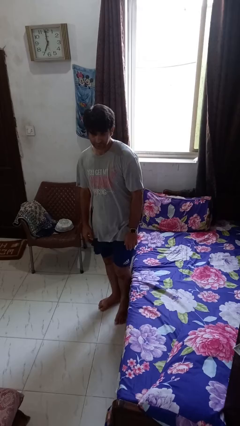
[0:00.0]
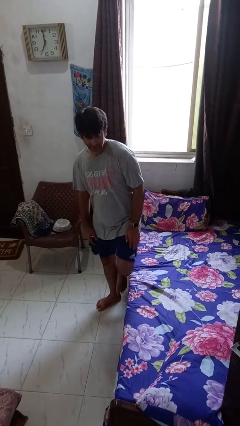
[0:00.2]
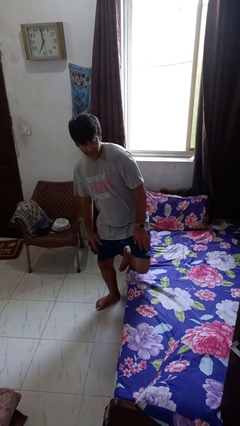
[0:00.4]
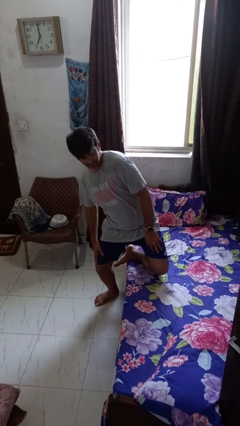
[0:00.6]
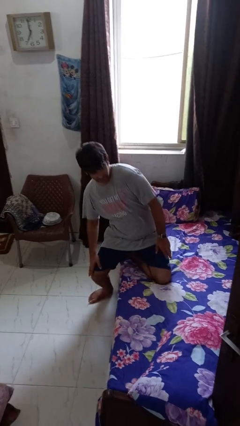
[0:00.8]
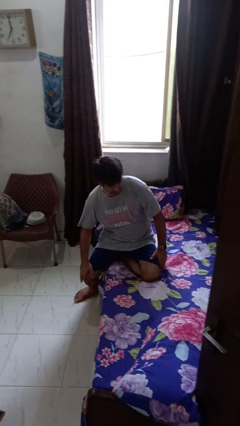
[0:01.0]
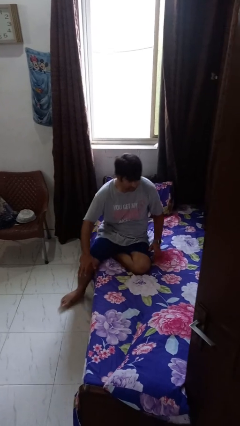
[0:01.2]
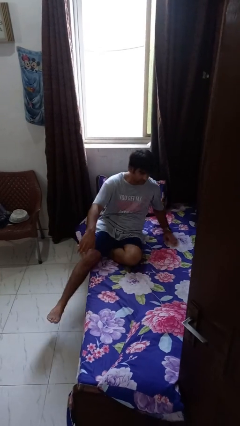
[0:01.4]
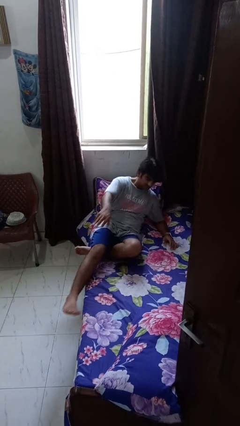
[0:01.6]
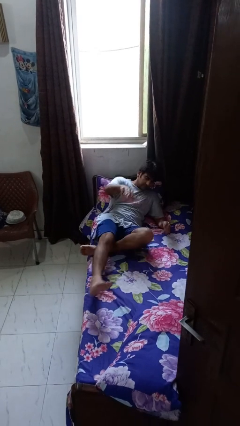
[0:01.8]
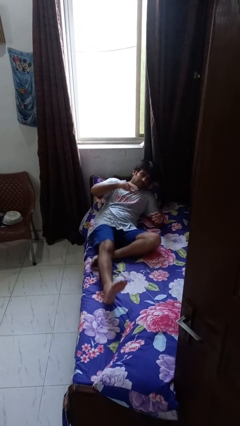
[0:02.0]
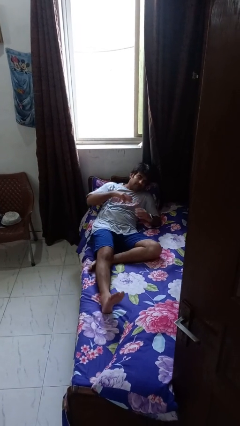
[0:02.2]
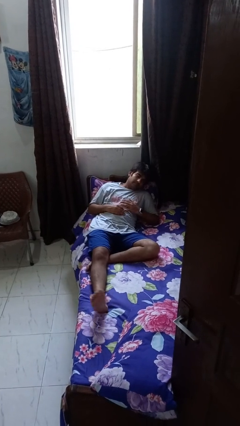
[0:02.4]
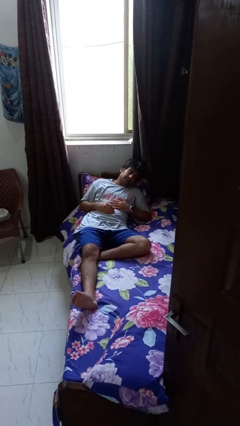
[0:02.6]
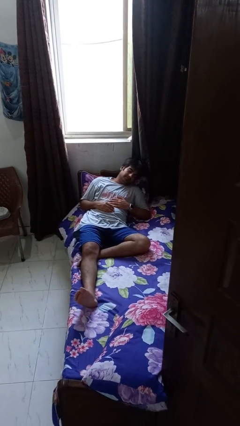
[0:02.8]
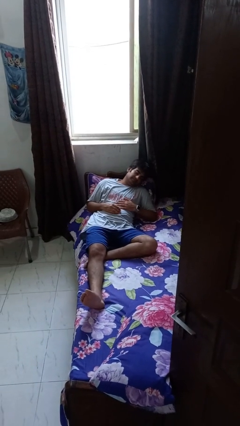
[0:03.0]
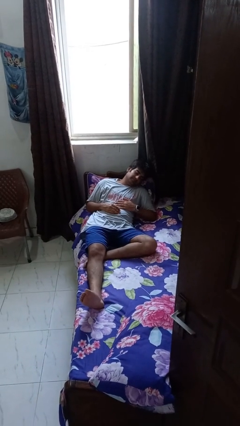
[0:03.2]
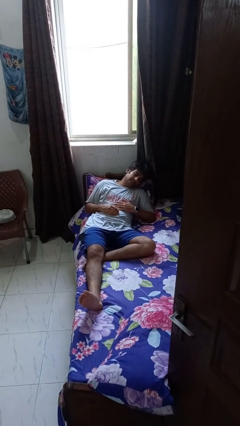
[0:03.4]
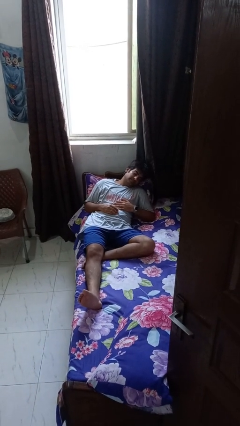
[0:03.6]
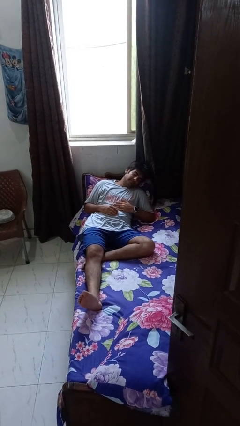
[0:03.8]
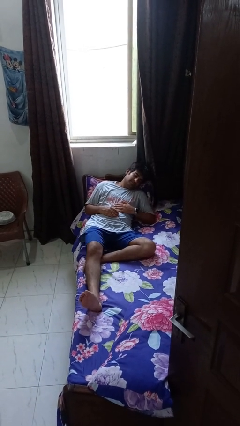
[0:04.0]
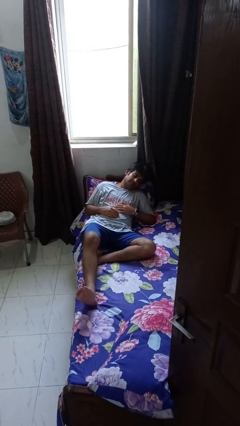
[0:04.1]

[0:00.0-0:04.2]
person lies down on bed

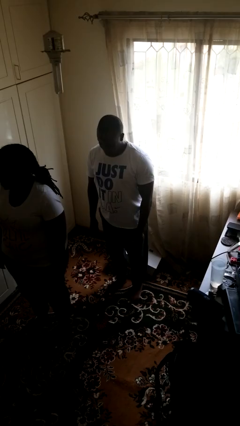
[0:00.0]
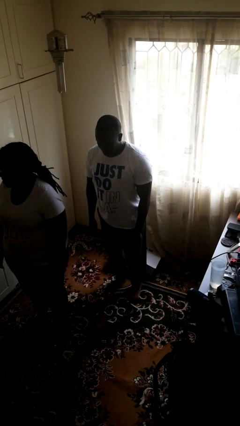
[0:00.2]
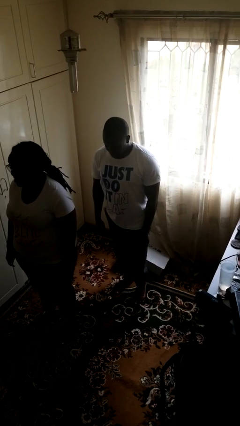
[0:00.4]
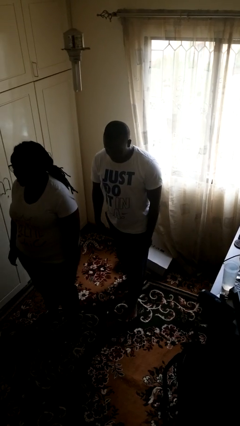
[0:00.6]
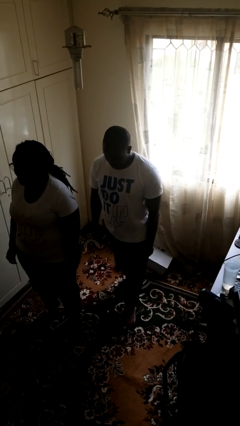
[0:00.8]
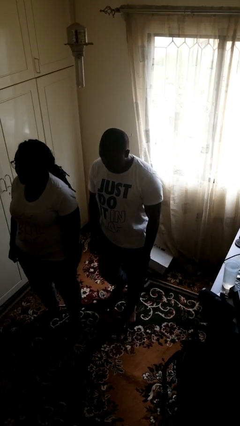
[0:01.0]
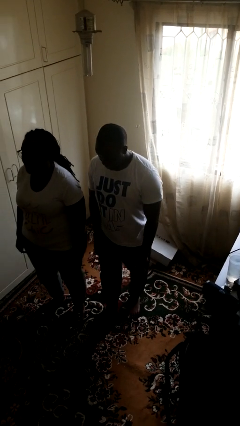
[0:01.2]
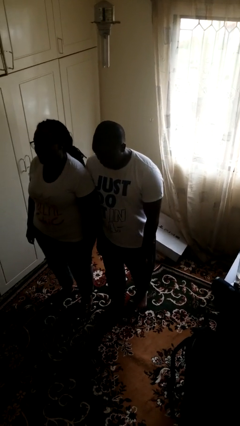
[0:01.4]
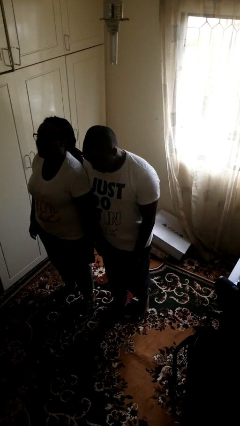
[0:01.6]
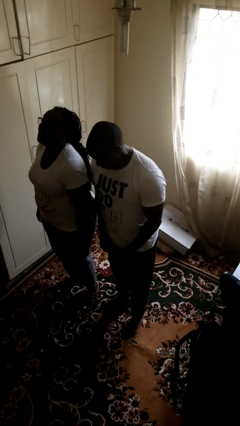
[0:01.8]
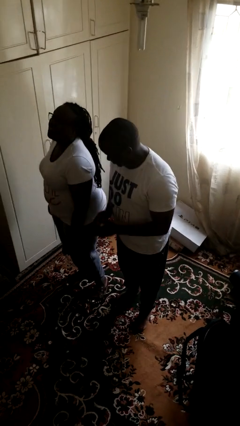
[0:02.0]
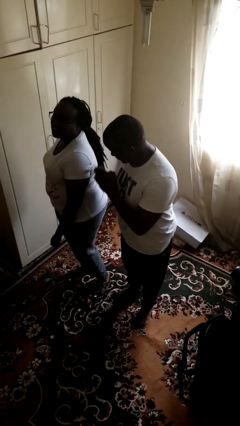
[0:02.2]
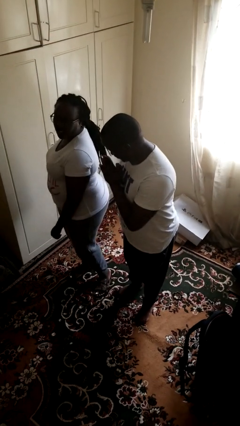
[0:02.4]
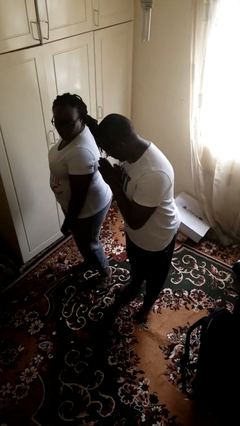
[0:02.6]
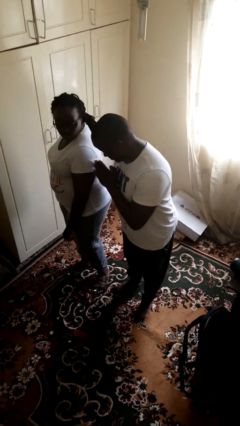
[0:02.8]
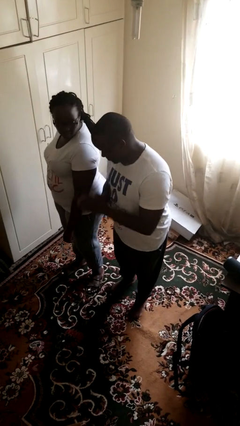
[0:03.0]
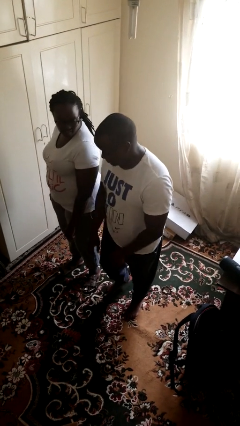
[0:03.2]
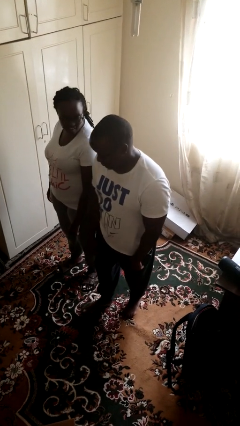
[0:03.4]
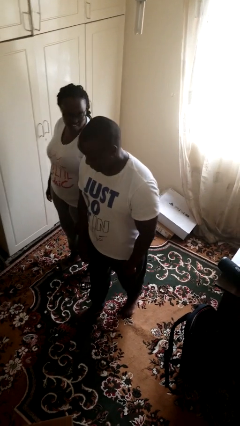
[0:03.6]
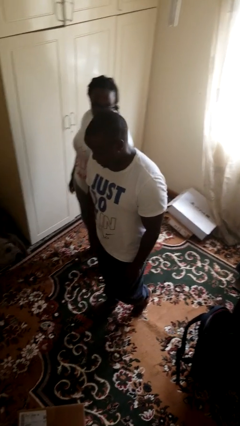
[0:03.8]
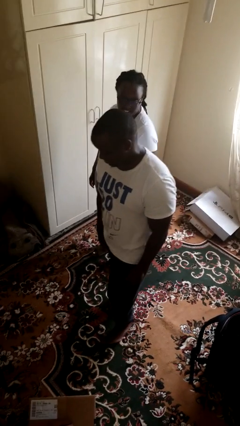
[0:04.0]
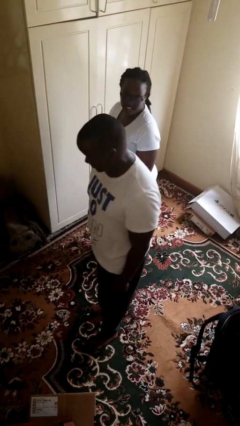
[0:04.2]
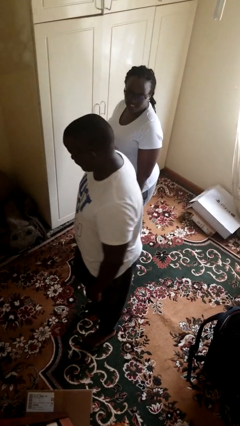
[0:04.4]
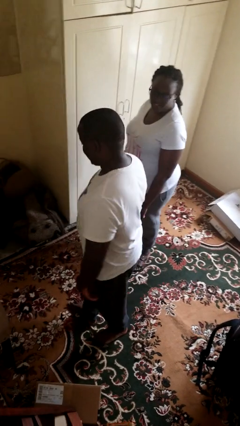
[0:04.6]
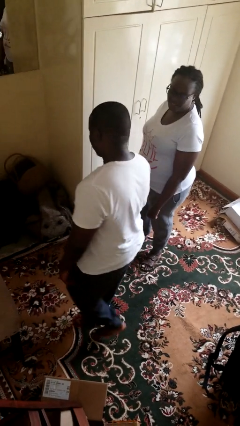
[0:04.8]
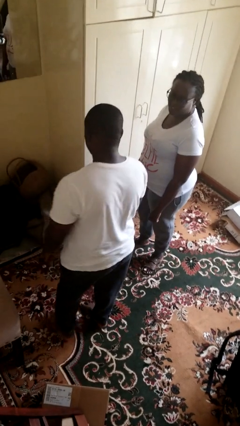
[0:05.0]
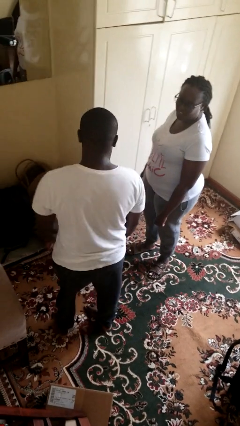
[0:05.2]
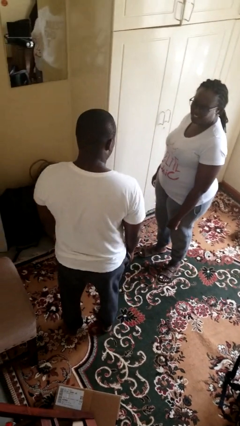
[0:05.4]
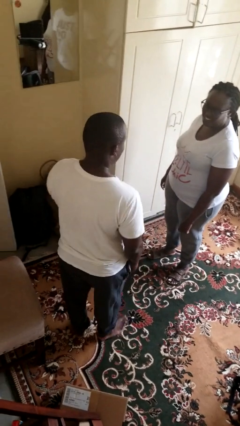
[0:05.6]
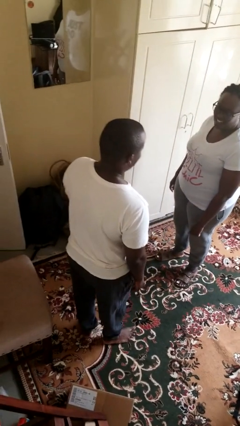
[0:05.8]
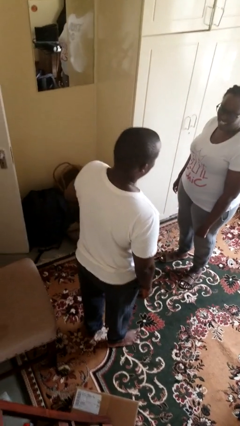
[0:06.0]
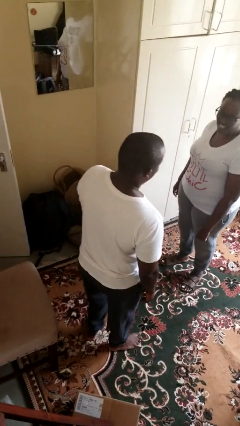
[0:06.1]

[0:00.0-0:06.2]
person bumps into person

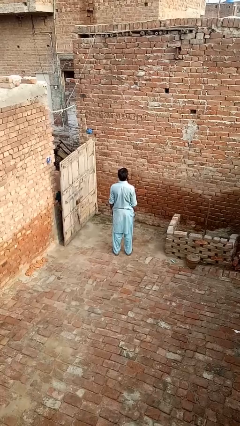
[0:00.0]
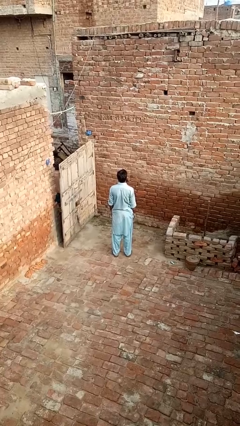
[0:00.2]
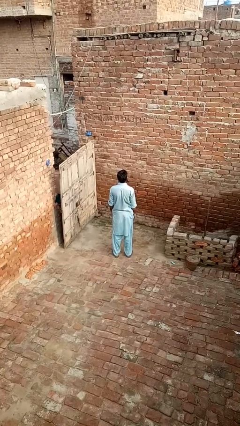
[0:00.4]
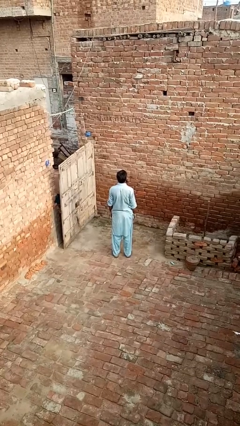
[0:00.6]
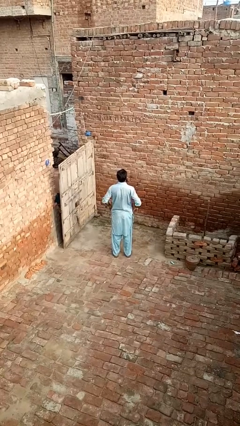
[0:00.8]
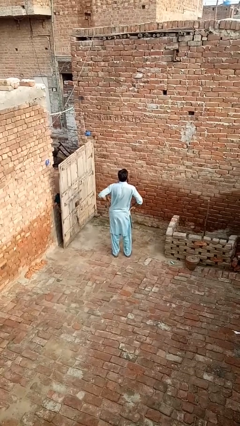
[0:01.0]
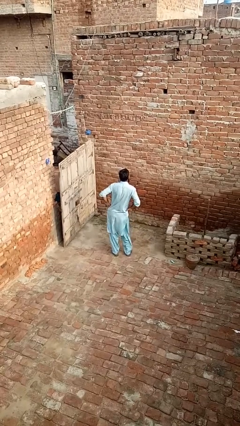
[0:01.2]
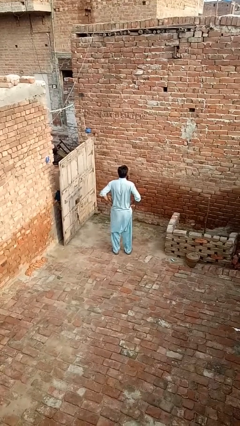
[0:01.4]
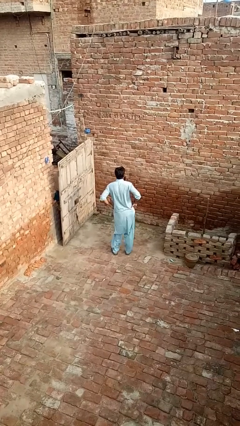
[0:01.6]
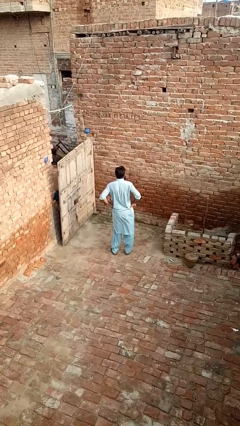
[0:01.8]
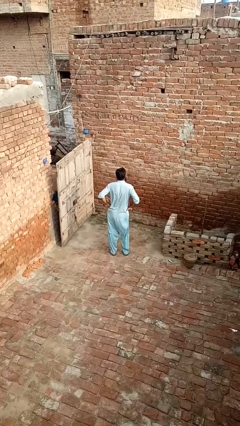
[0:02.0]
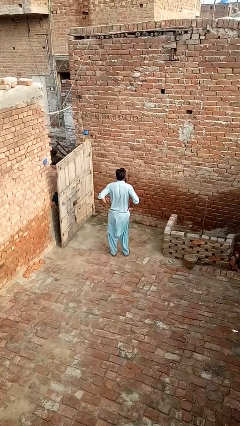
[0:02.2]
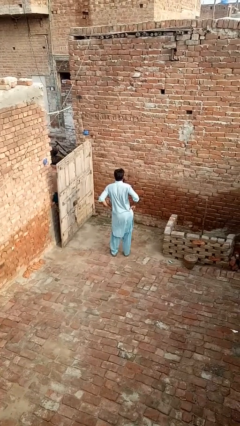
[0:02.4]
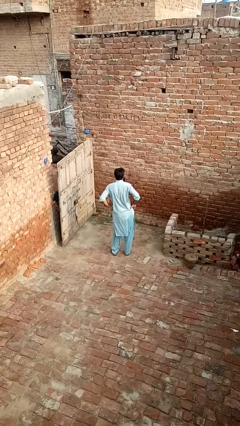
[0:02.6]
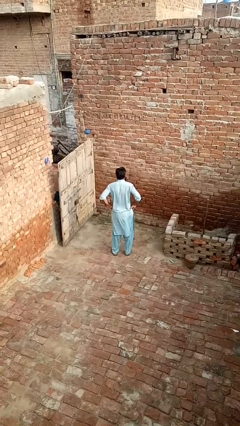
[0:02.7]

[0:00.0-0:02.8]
person wiggles hips

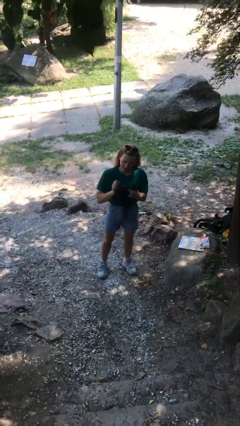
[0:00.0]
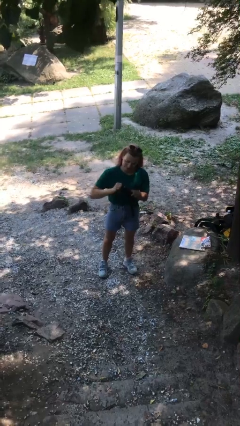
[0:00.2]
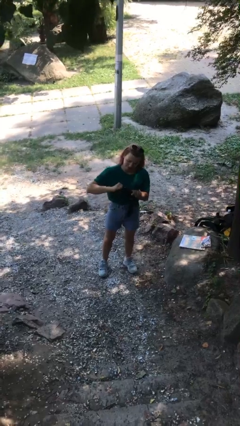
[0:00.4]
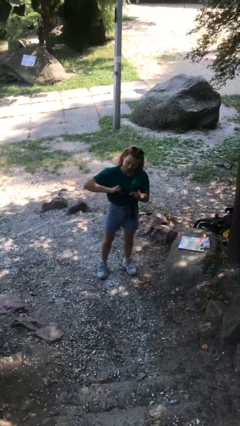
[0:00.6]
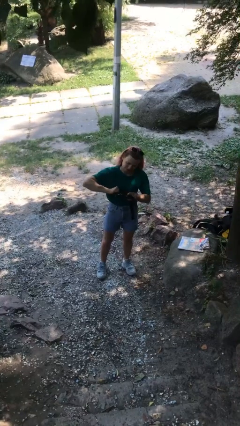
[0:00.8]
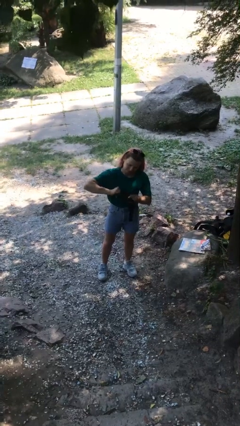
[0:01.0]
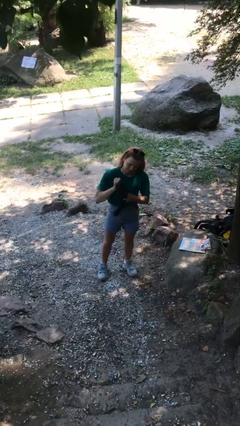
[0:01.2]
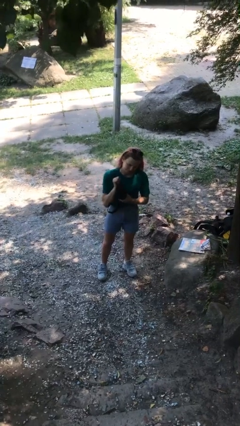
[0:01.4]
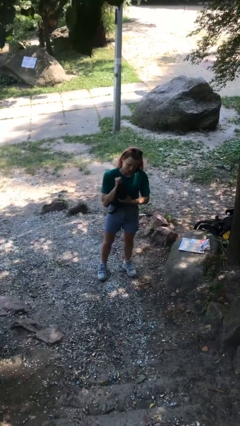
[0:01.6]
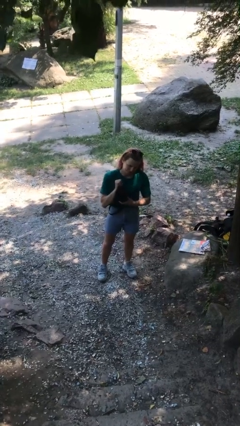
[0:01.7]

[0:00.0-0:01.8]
person squeezes object

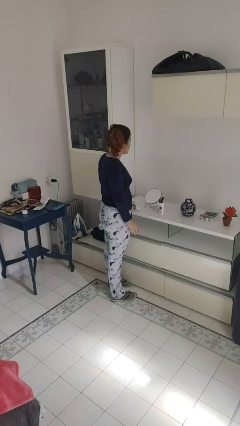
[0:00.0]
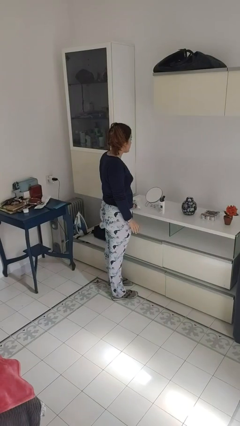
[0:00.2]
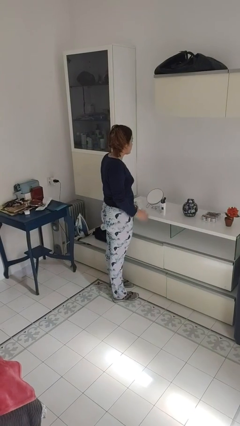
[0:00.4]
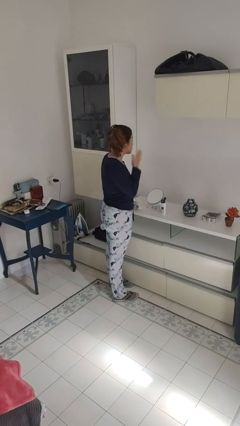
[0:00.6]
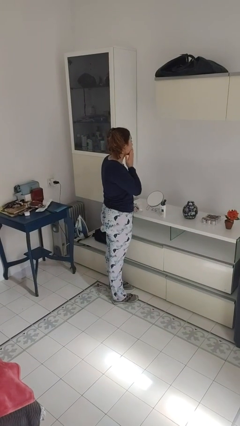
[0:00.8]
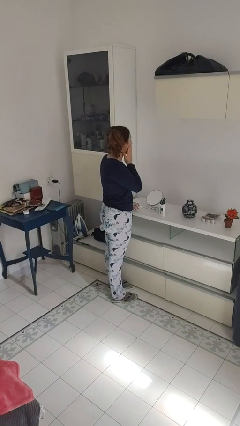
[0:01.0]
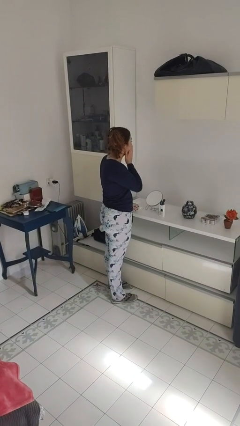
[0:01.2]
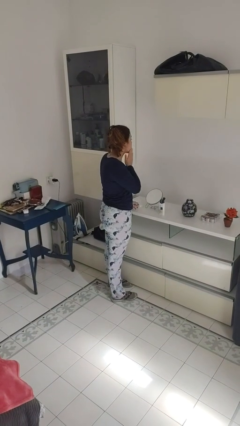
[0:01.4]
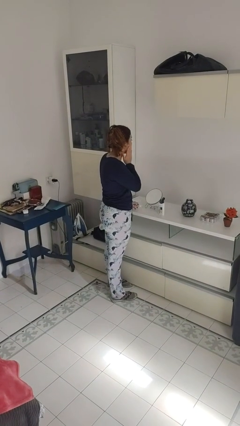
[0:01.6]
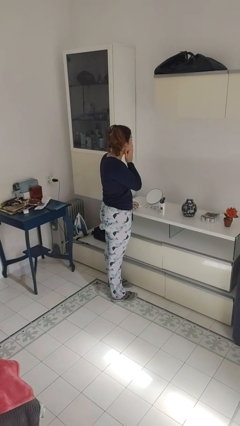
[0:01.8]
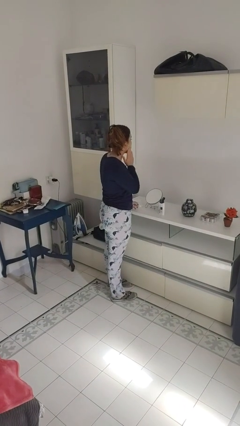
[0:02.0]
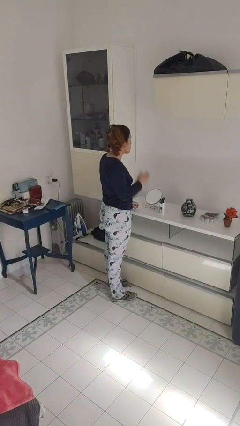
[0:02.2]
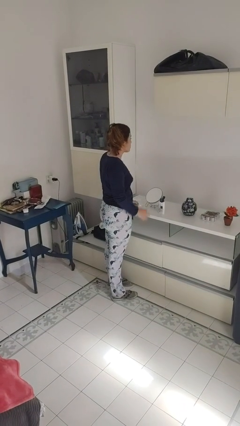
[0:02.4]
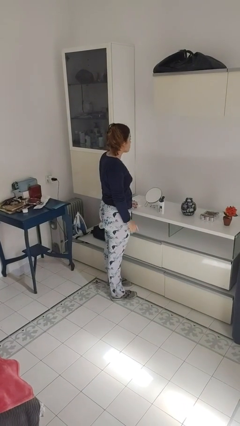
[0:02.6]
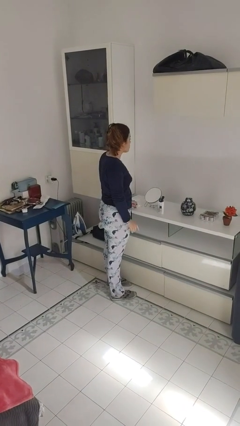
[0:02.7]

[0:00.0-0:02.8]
person applies shaving cream
